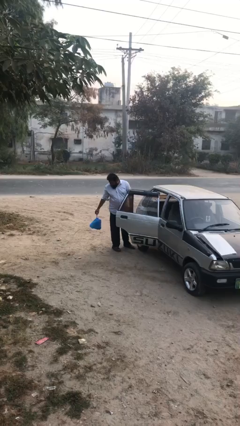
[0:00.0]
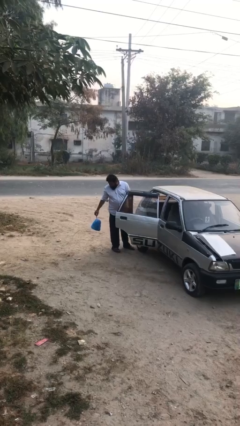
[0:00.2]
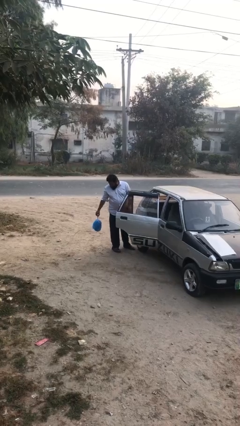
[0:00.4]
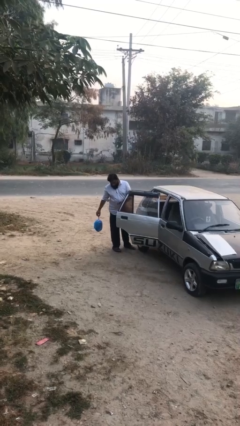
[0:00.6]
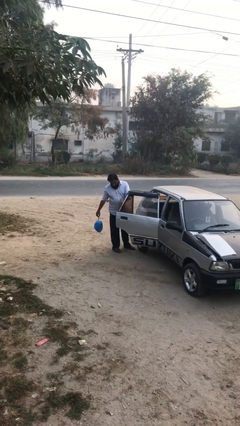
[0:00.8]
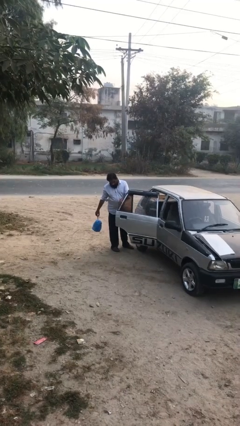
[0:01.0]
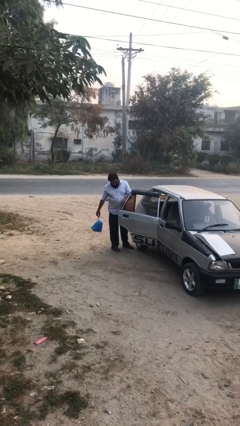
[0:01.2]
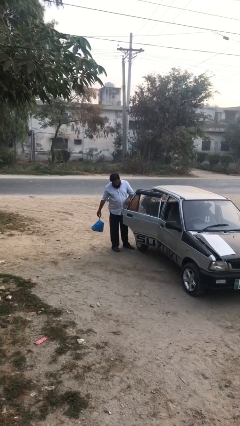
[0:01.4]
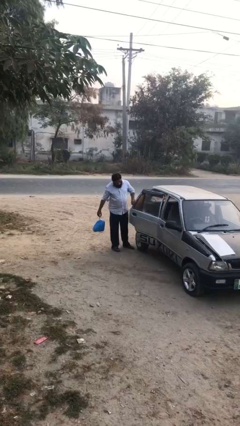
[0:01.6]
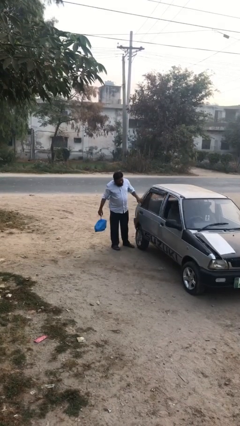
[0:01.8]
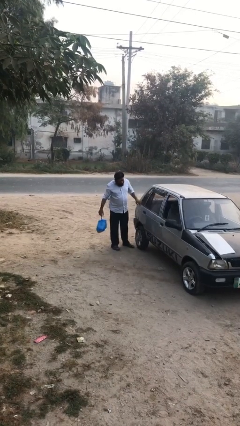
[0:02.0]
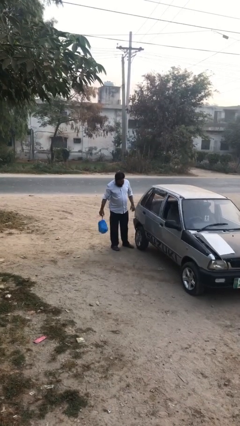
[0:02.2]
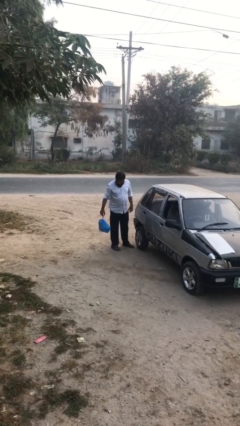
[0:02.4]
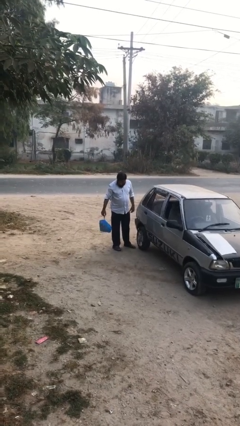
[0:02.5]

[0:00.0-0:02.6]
person closes car door

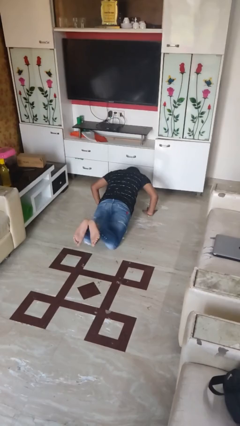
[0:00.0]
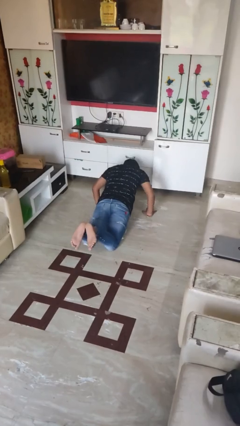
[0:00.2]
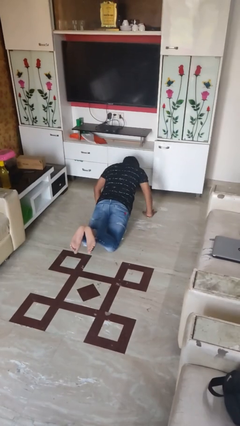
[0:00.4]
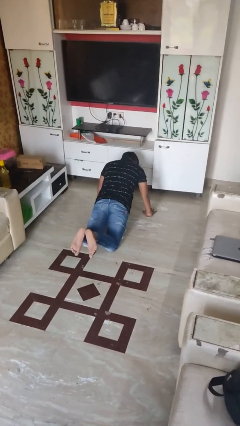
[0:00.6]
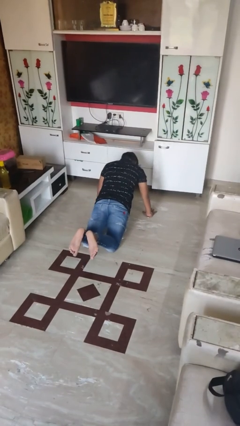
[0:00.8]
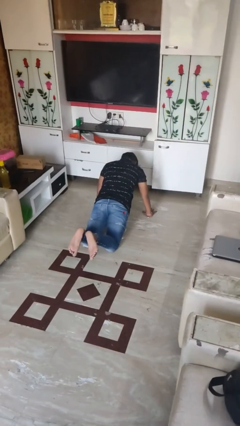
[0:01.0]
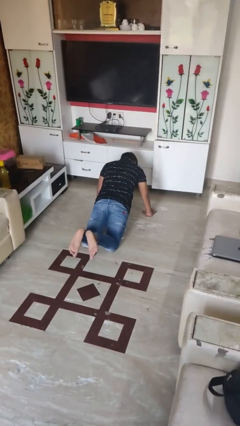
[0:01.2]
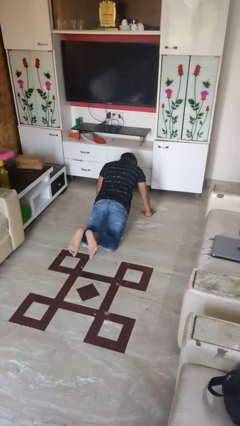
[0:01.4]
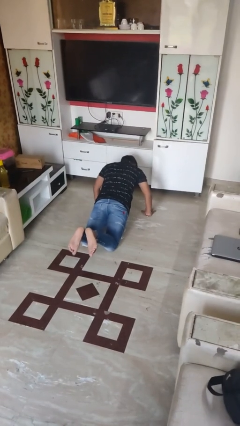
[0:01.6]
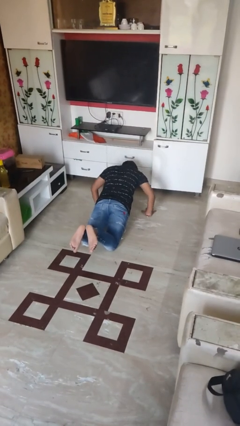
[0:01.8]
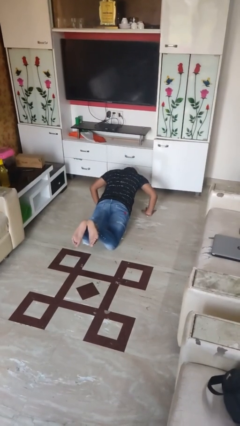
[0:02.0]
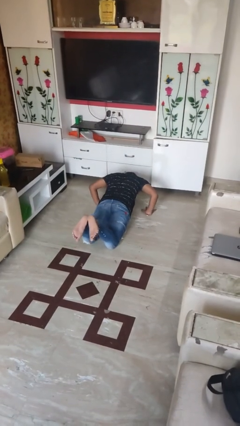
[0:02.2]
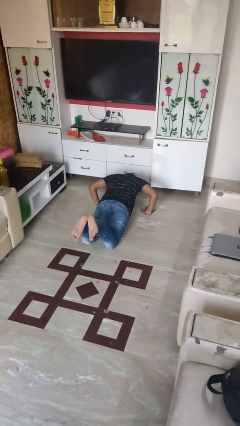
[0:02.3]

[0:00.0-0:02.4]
person exercises with pushup

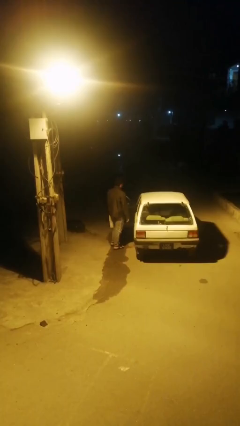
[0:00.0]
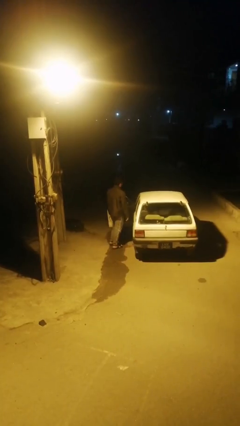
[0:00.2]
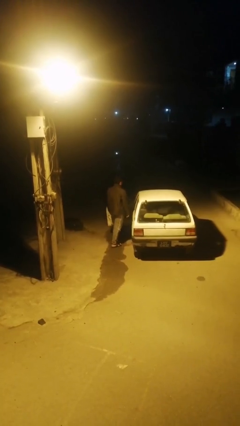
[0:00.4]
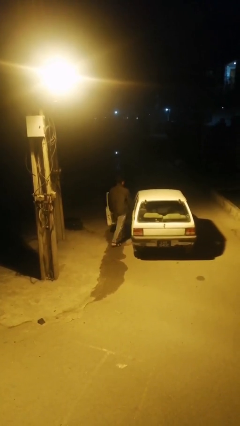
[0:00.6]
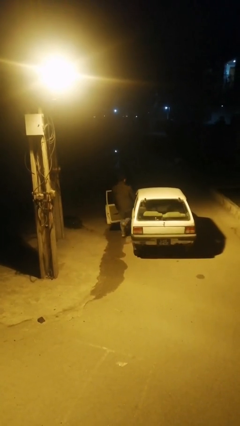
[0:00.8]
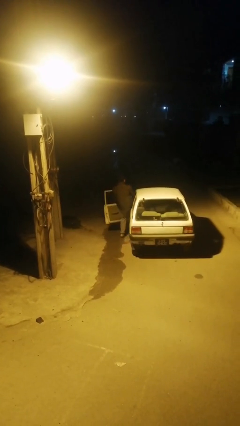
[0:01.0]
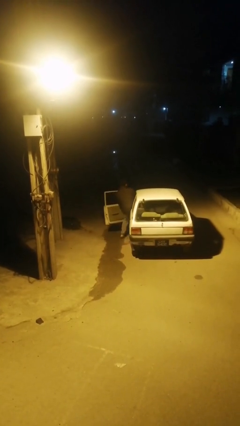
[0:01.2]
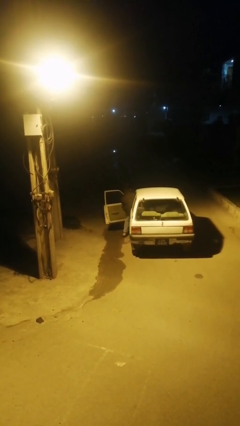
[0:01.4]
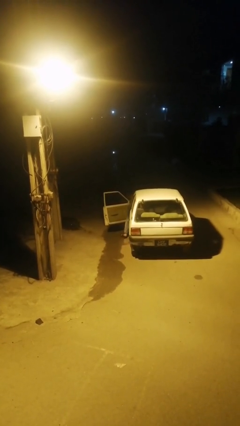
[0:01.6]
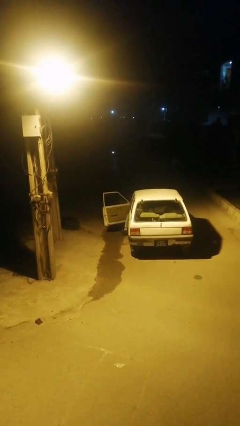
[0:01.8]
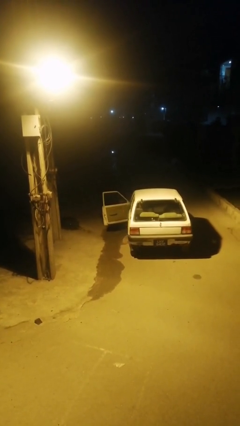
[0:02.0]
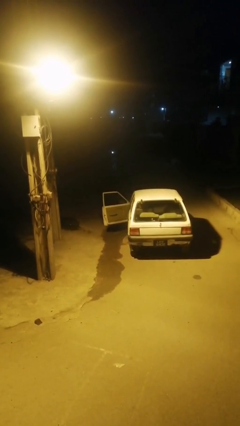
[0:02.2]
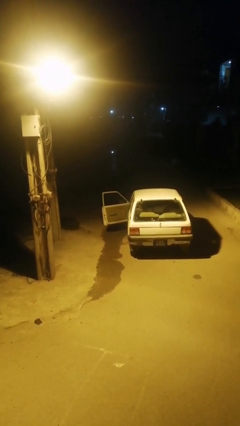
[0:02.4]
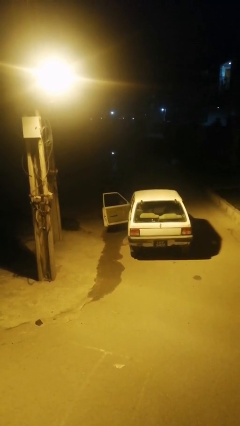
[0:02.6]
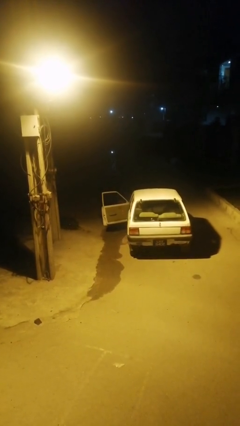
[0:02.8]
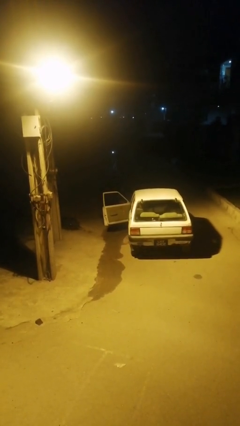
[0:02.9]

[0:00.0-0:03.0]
person enters car

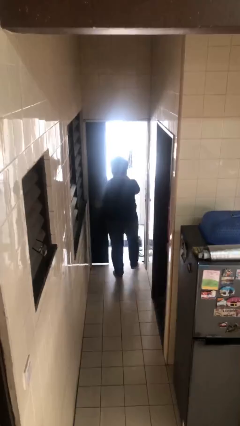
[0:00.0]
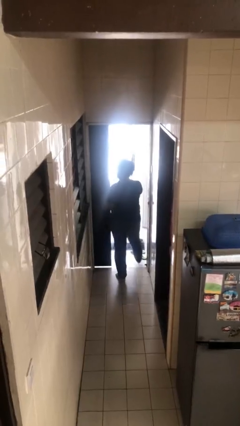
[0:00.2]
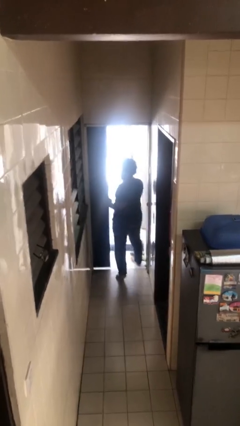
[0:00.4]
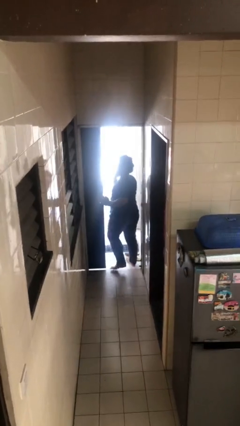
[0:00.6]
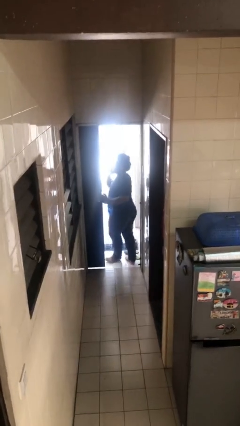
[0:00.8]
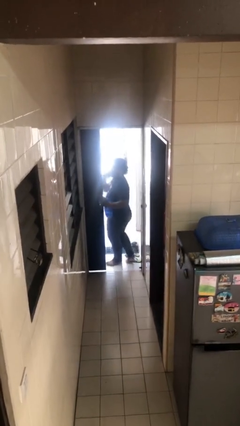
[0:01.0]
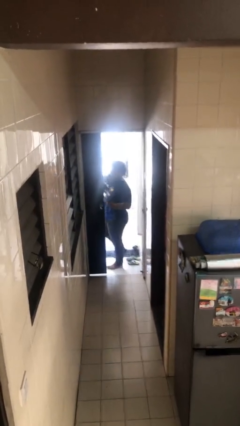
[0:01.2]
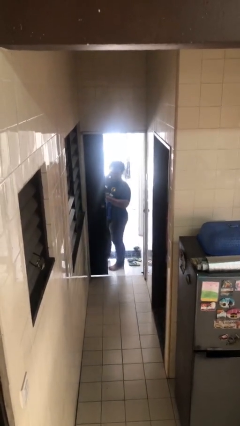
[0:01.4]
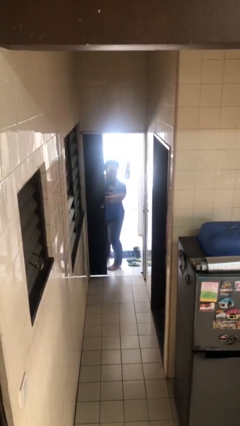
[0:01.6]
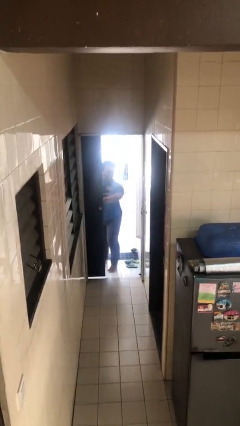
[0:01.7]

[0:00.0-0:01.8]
person exits scene through structure

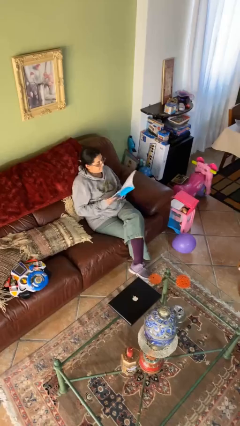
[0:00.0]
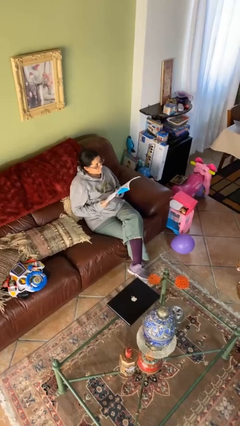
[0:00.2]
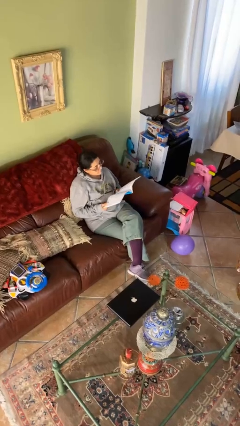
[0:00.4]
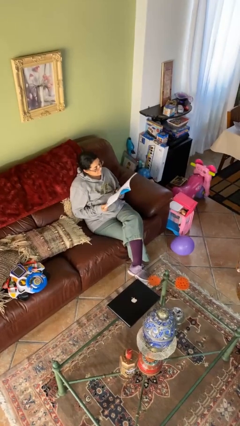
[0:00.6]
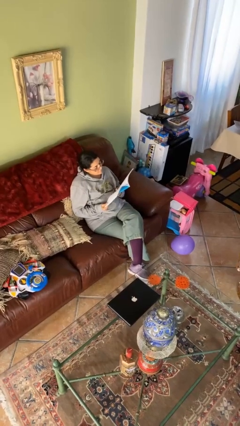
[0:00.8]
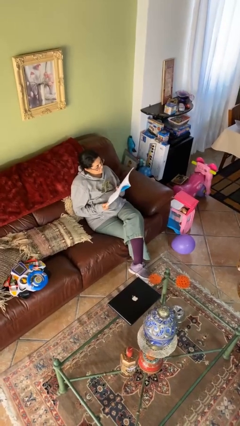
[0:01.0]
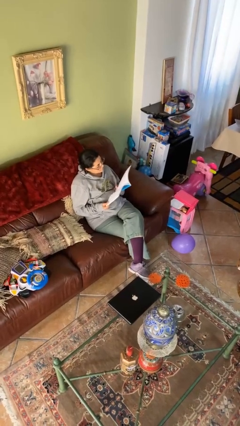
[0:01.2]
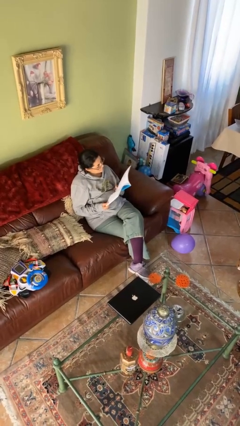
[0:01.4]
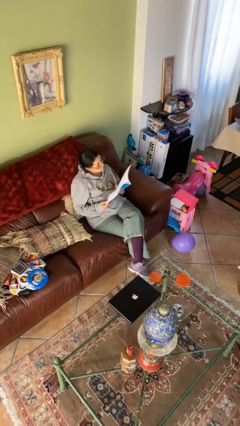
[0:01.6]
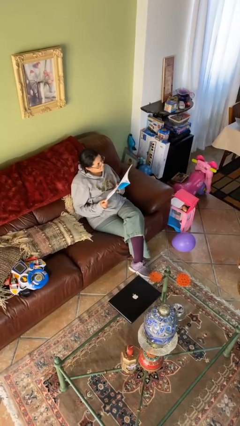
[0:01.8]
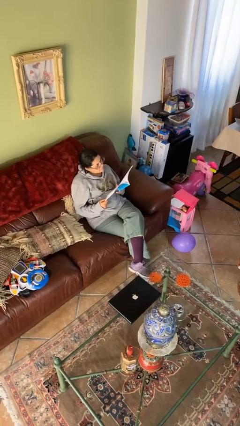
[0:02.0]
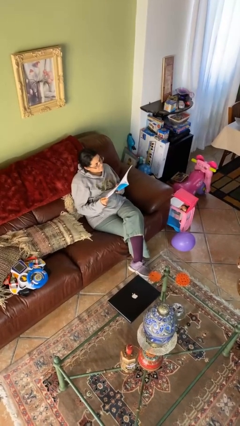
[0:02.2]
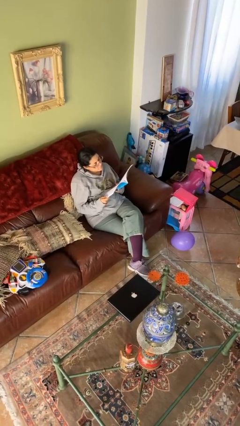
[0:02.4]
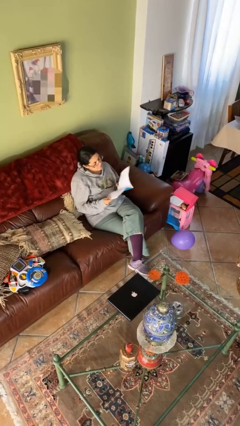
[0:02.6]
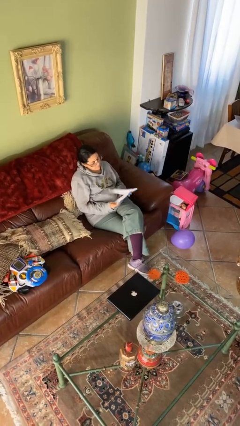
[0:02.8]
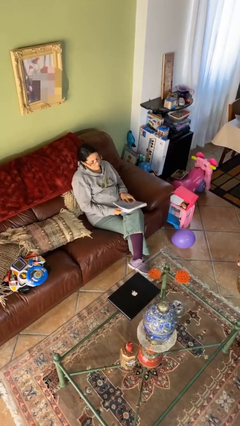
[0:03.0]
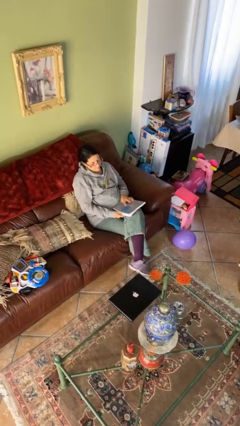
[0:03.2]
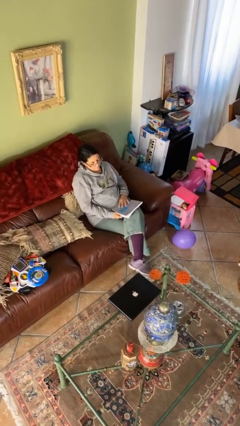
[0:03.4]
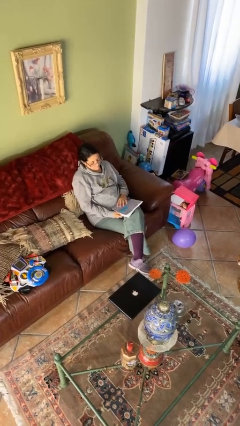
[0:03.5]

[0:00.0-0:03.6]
person reads document

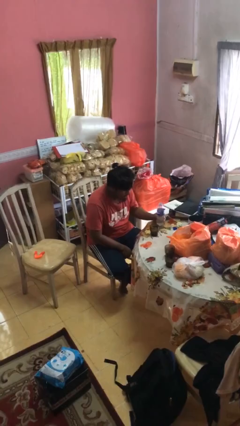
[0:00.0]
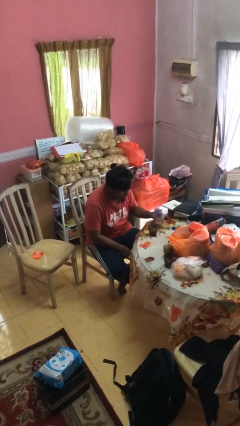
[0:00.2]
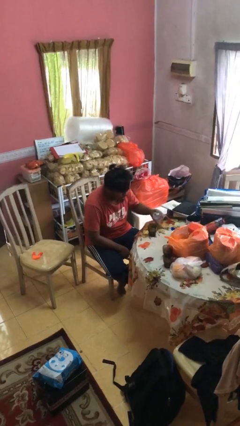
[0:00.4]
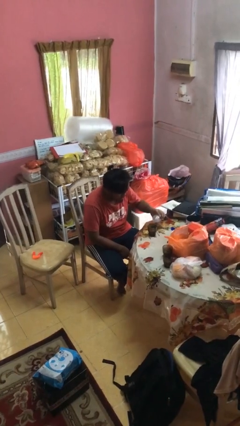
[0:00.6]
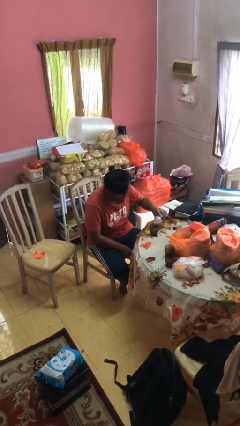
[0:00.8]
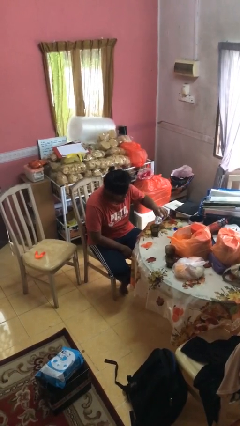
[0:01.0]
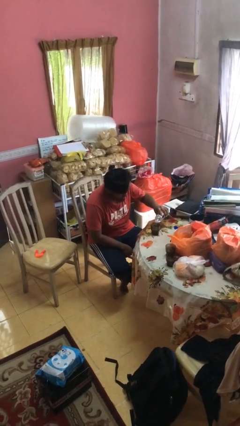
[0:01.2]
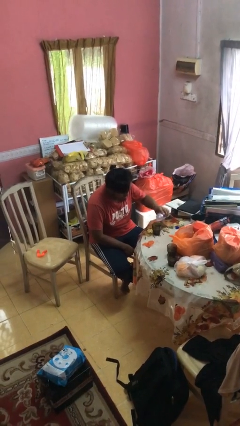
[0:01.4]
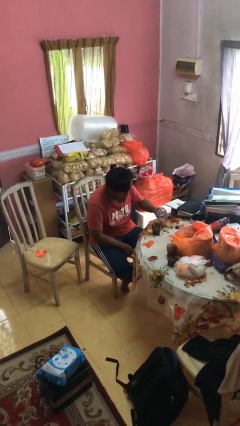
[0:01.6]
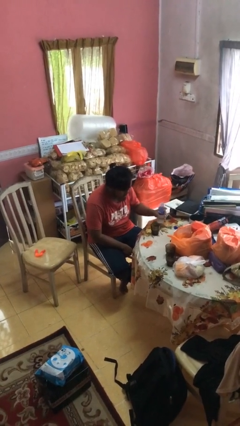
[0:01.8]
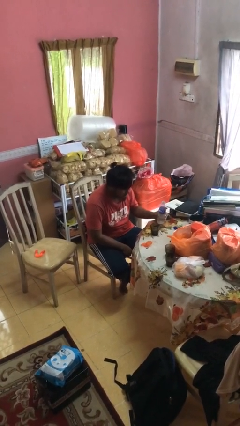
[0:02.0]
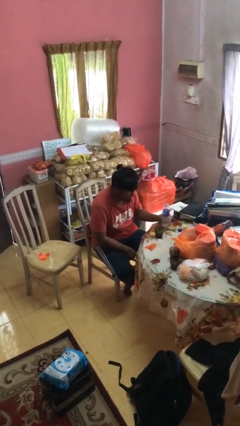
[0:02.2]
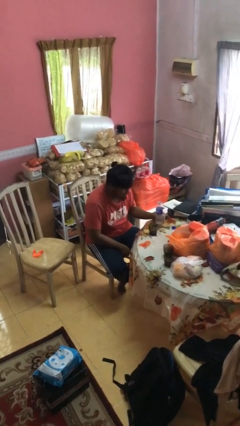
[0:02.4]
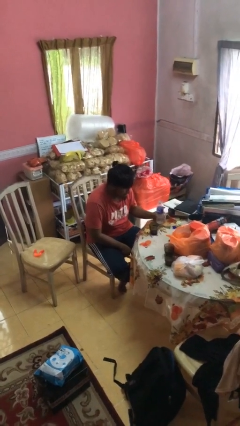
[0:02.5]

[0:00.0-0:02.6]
person pours liquid into cup

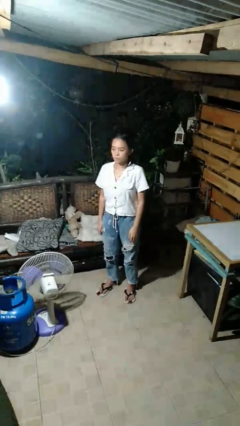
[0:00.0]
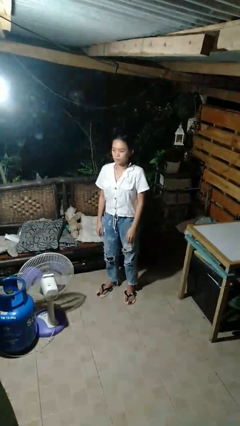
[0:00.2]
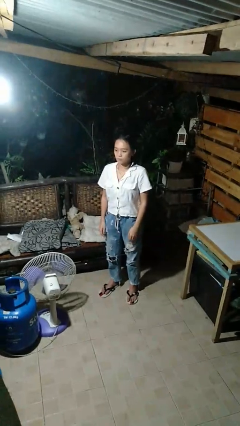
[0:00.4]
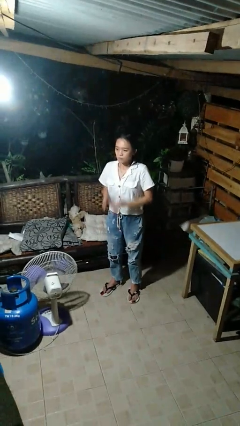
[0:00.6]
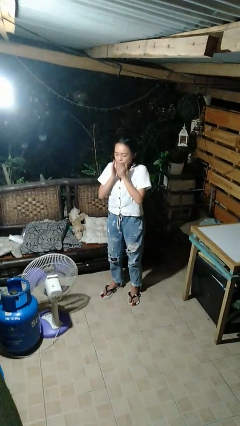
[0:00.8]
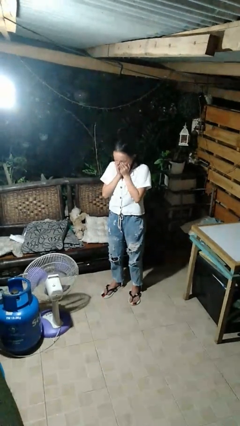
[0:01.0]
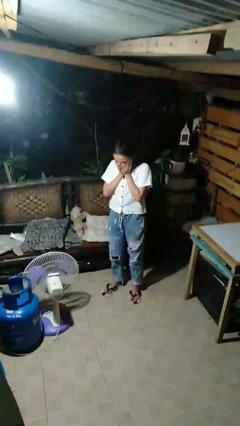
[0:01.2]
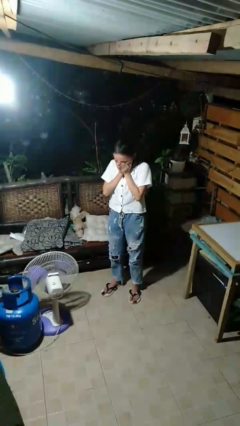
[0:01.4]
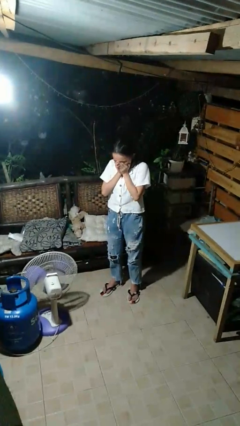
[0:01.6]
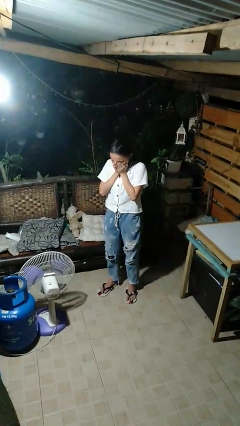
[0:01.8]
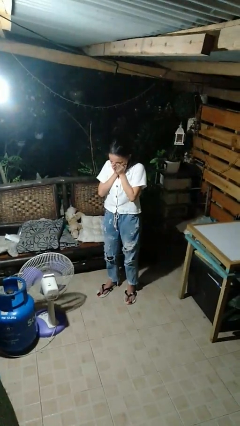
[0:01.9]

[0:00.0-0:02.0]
person sneezes into hand
